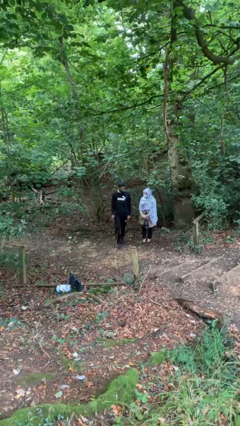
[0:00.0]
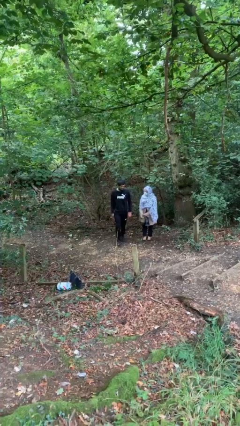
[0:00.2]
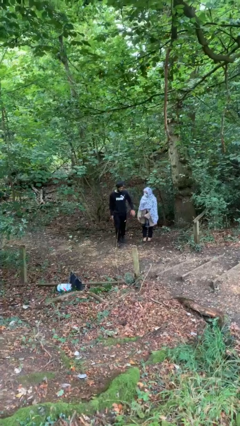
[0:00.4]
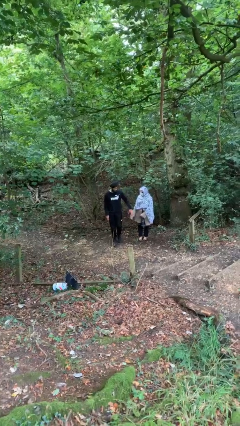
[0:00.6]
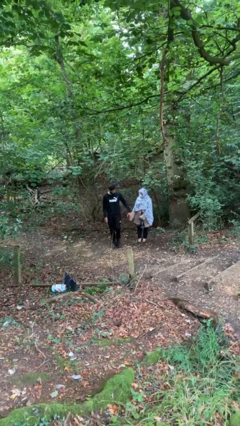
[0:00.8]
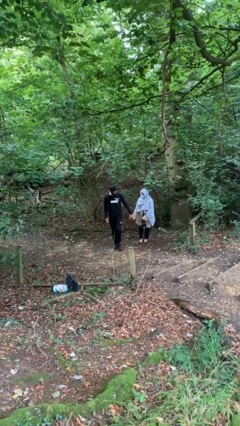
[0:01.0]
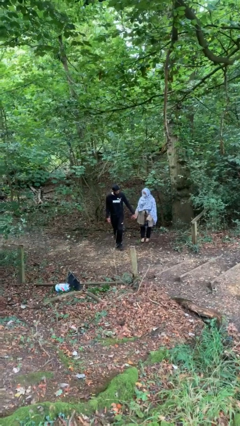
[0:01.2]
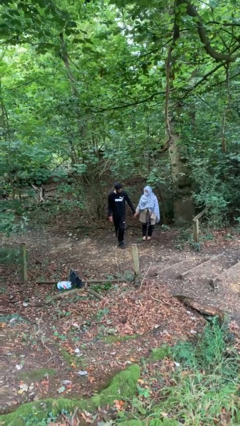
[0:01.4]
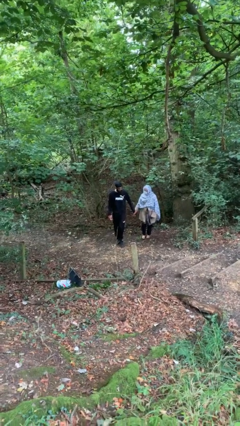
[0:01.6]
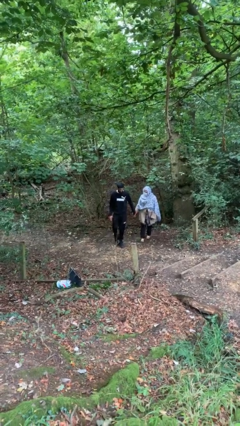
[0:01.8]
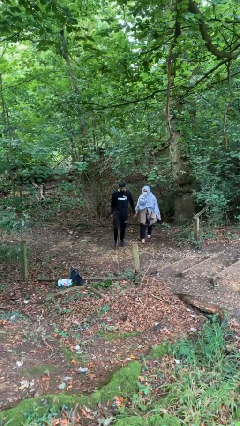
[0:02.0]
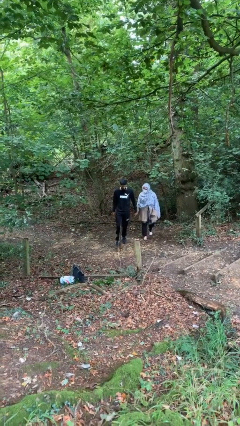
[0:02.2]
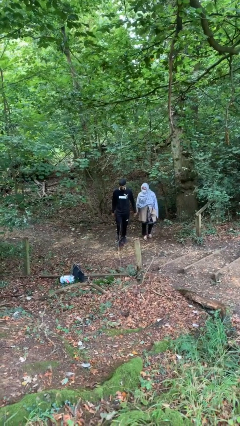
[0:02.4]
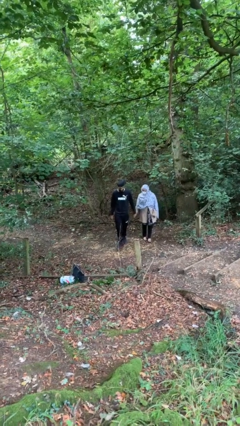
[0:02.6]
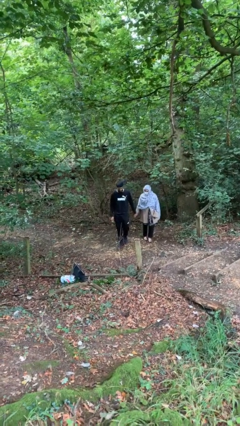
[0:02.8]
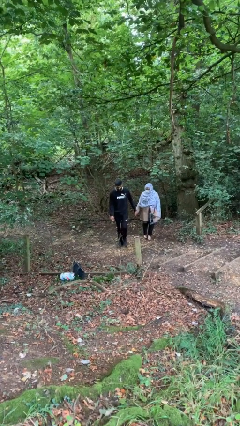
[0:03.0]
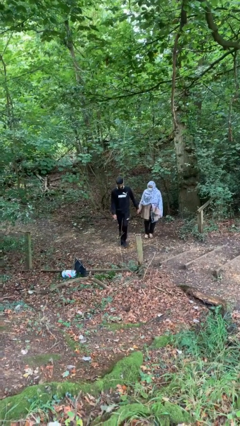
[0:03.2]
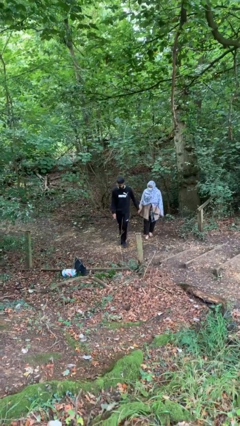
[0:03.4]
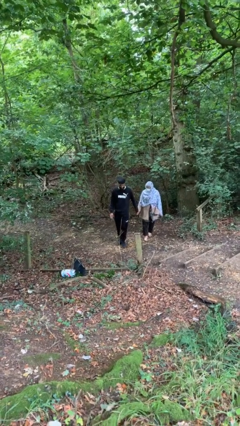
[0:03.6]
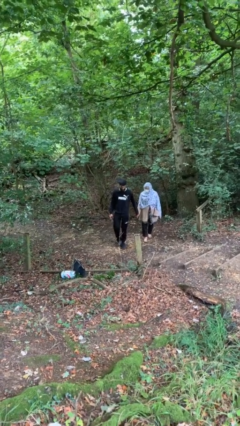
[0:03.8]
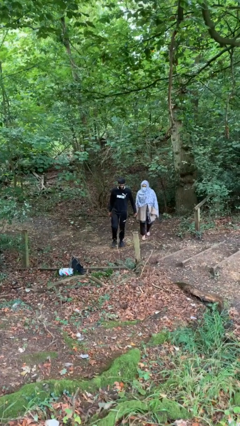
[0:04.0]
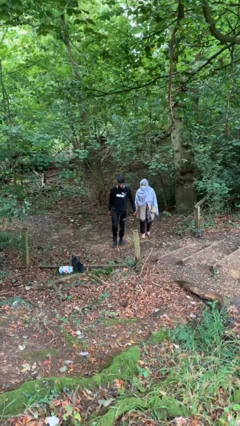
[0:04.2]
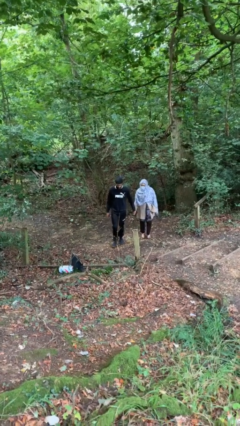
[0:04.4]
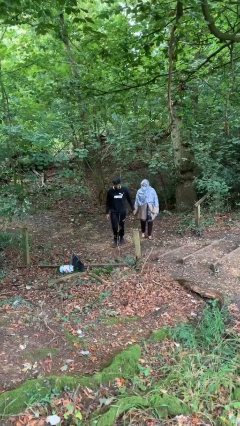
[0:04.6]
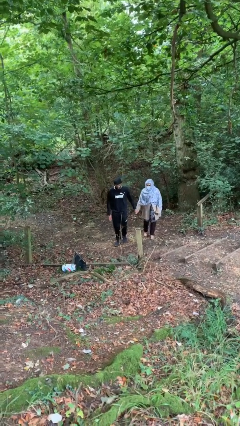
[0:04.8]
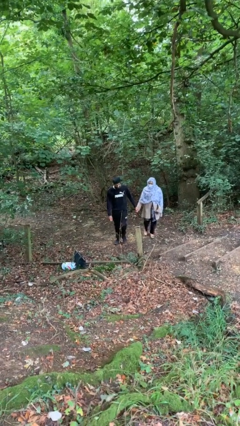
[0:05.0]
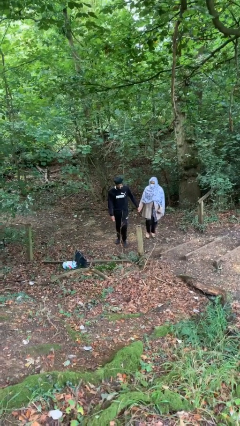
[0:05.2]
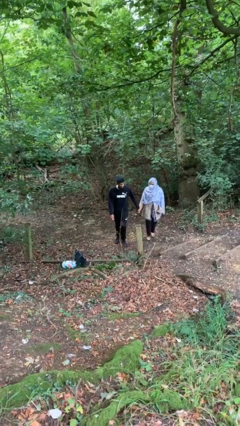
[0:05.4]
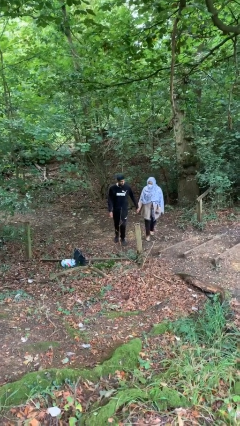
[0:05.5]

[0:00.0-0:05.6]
person holds hand

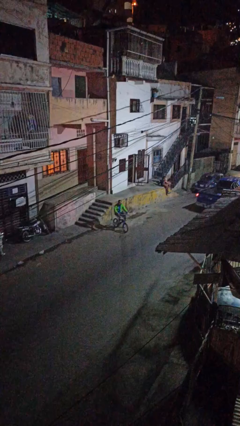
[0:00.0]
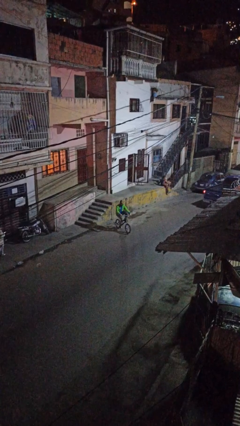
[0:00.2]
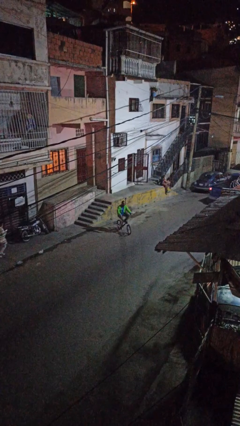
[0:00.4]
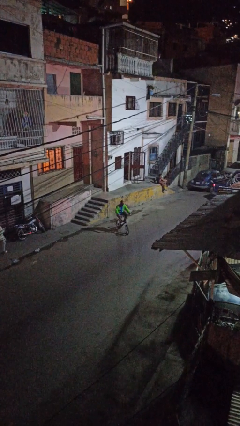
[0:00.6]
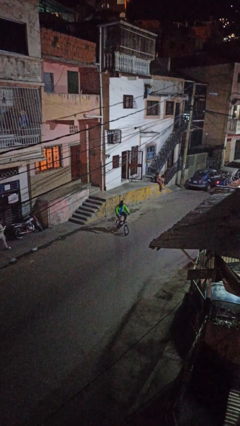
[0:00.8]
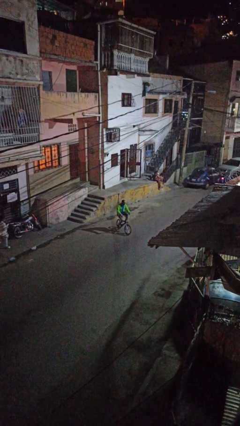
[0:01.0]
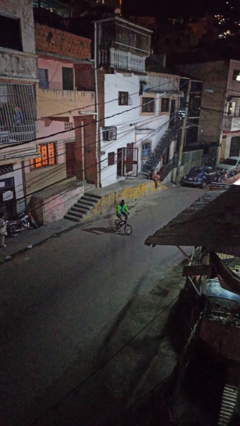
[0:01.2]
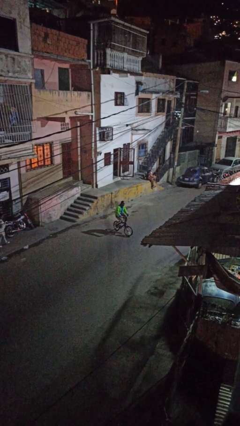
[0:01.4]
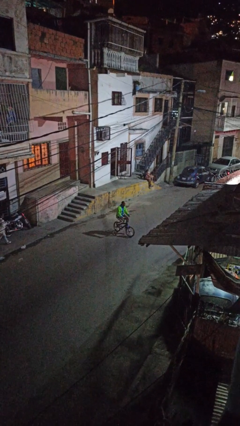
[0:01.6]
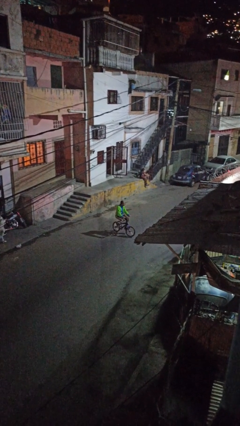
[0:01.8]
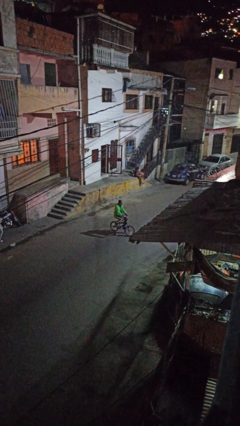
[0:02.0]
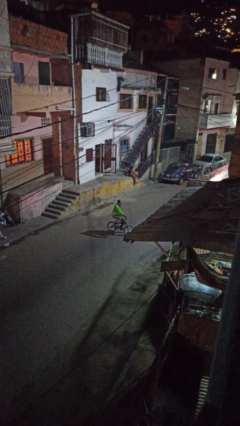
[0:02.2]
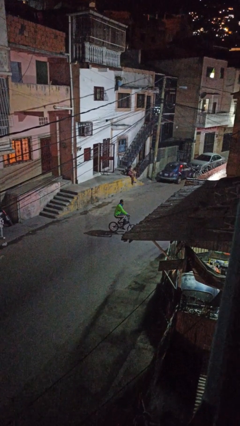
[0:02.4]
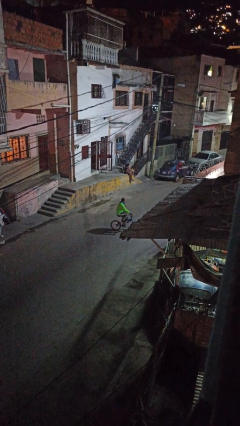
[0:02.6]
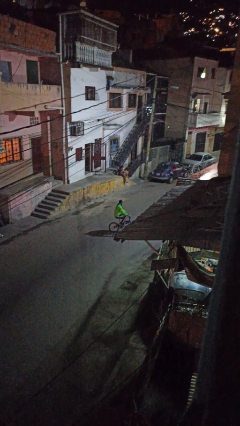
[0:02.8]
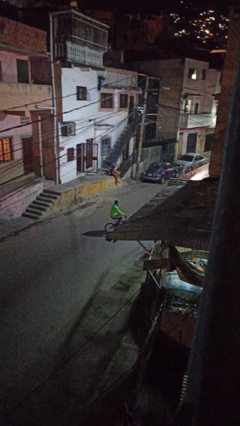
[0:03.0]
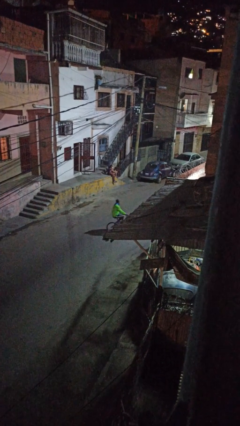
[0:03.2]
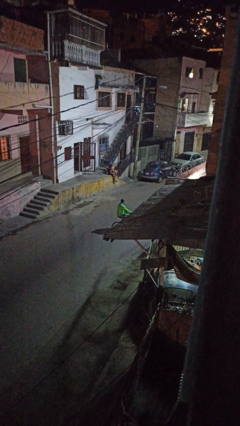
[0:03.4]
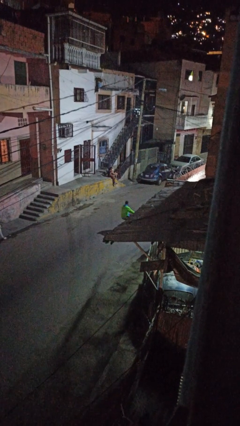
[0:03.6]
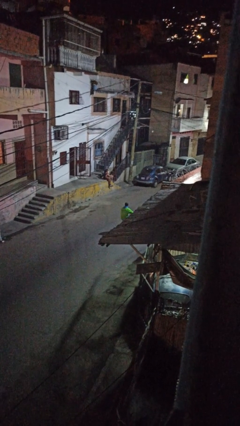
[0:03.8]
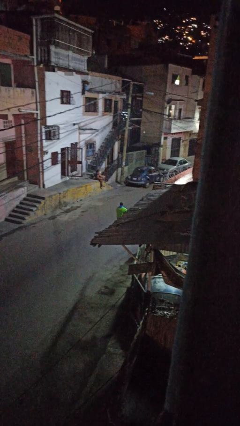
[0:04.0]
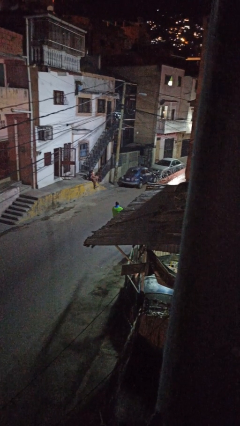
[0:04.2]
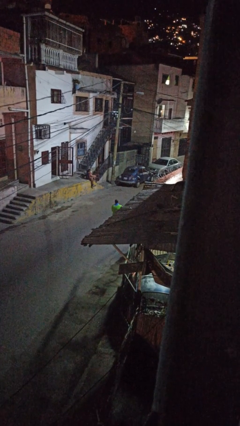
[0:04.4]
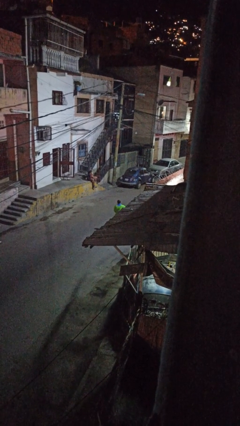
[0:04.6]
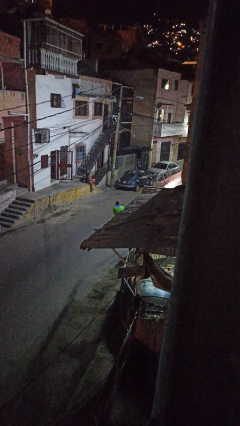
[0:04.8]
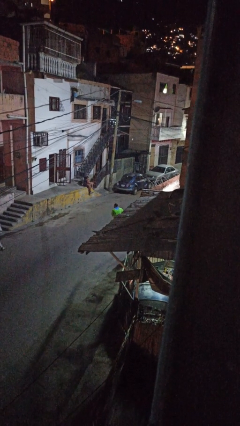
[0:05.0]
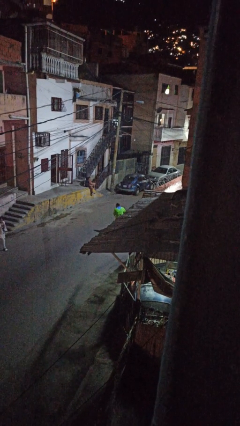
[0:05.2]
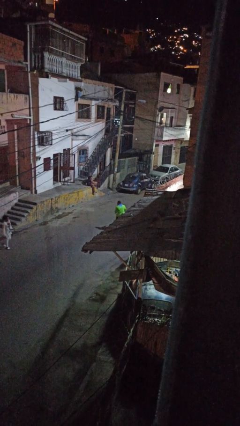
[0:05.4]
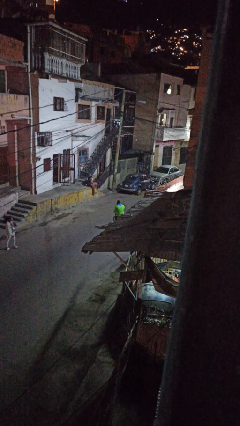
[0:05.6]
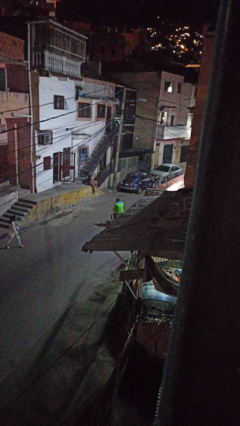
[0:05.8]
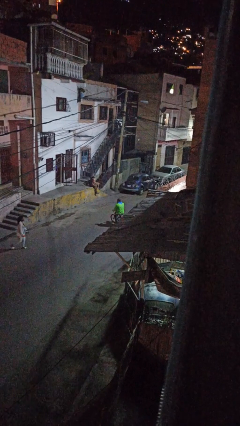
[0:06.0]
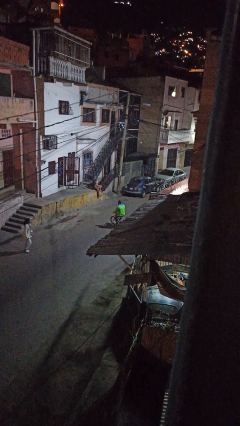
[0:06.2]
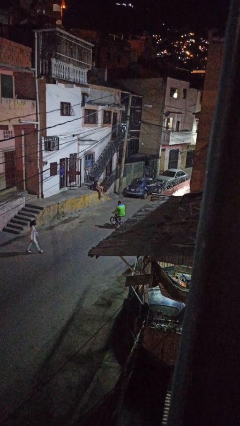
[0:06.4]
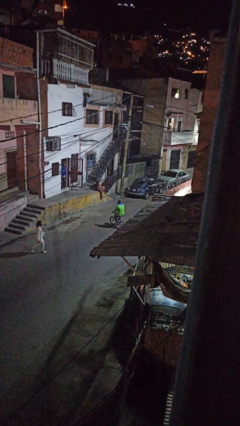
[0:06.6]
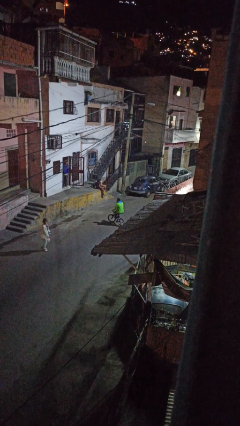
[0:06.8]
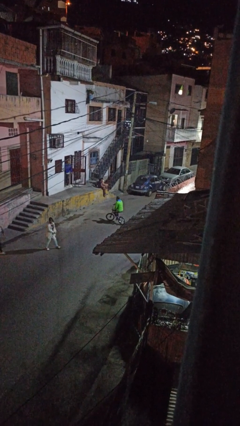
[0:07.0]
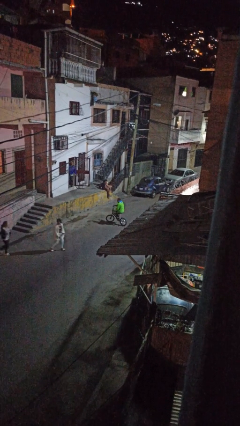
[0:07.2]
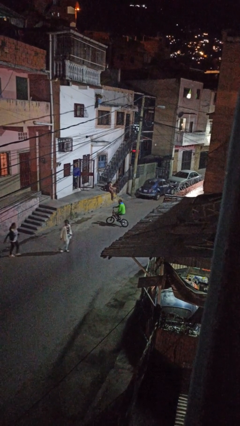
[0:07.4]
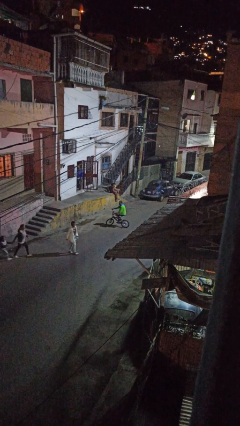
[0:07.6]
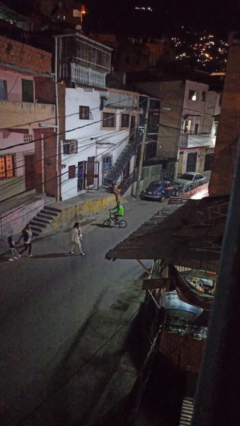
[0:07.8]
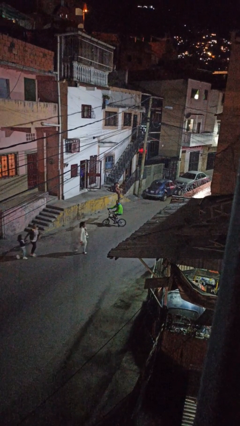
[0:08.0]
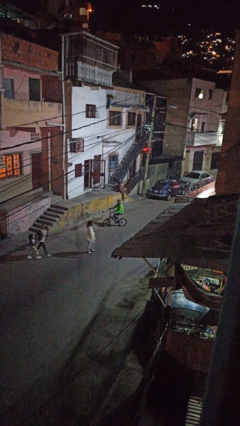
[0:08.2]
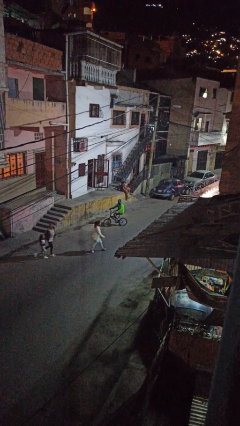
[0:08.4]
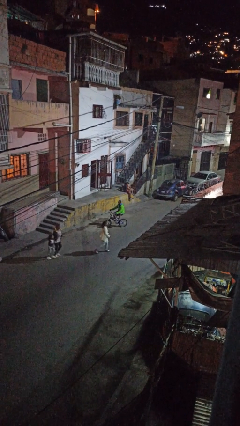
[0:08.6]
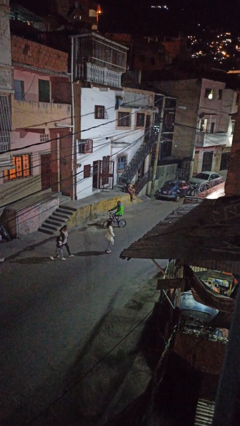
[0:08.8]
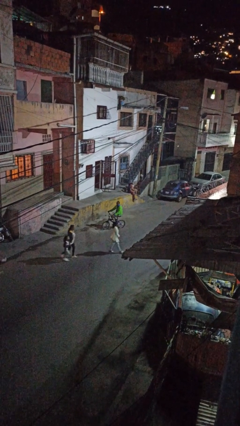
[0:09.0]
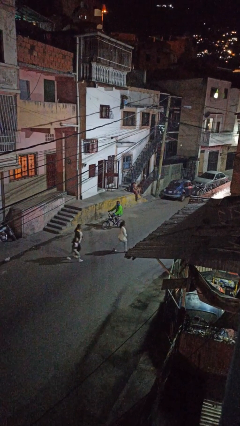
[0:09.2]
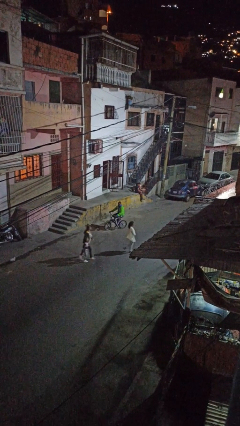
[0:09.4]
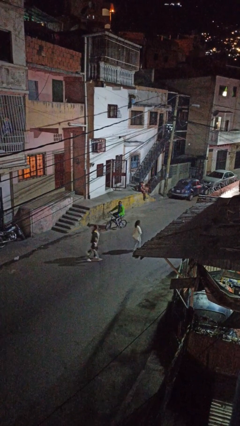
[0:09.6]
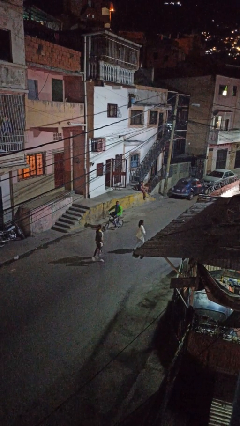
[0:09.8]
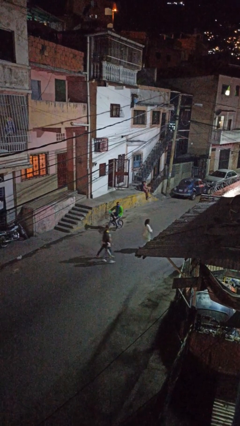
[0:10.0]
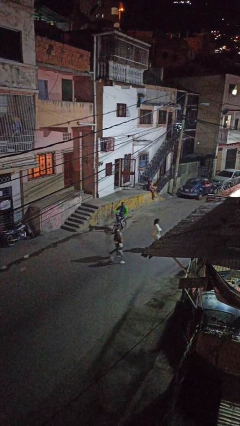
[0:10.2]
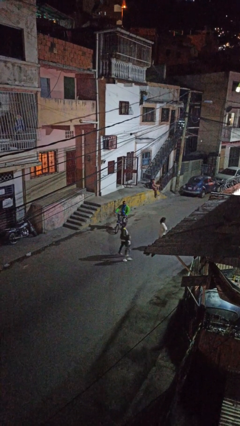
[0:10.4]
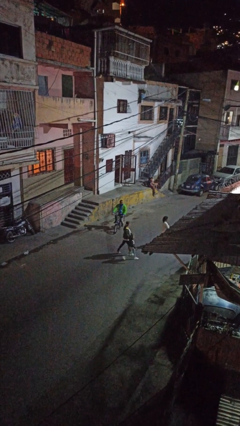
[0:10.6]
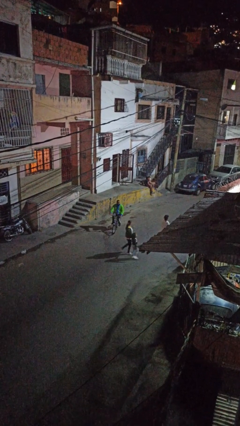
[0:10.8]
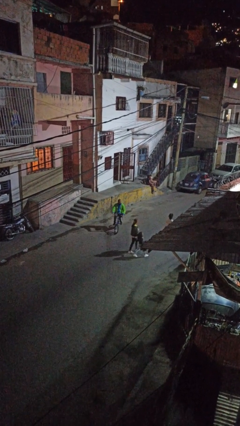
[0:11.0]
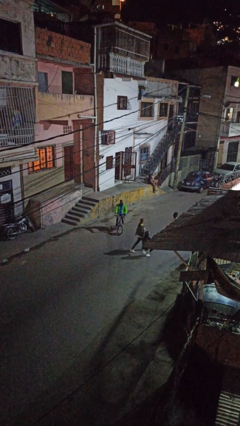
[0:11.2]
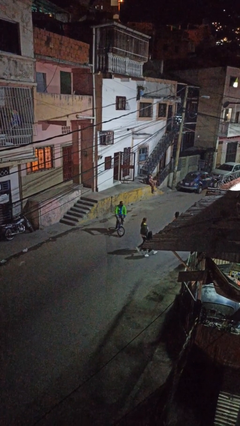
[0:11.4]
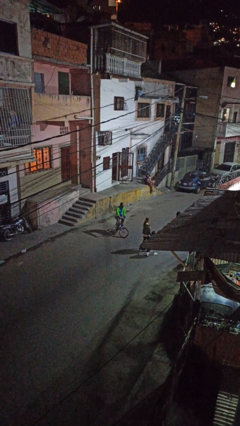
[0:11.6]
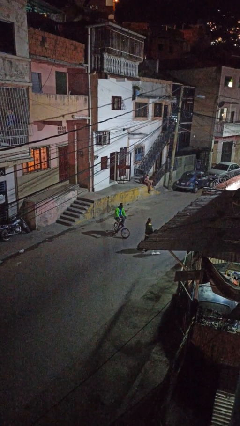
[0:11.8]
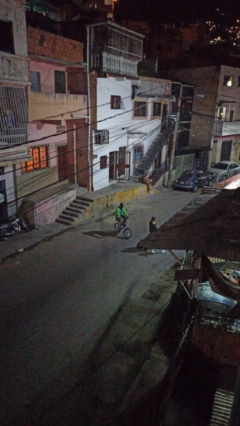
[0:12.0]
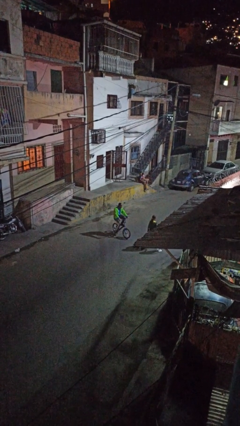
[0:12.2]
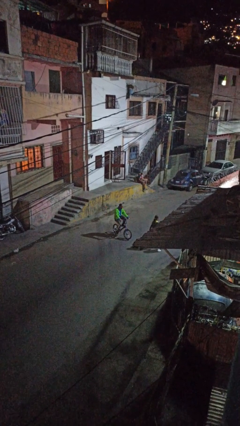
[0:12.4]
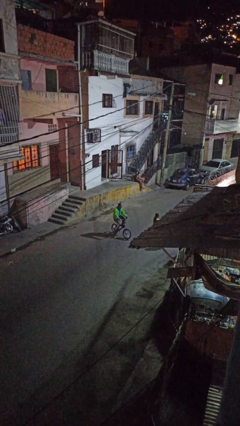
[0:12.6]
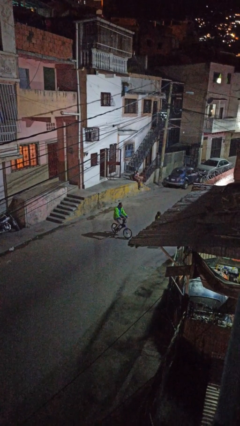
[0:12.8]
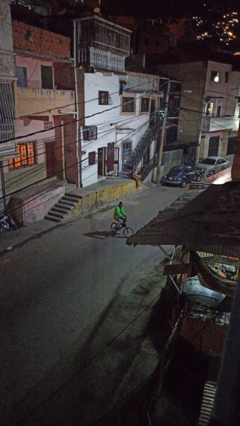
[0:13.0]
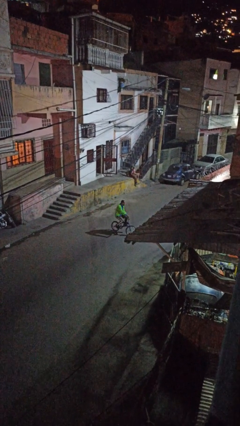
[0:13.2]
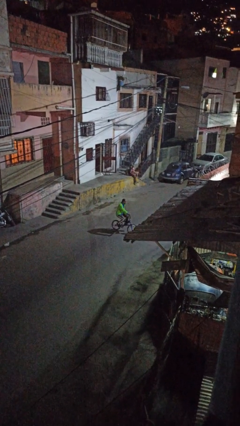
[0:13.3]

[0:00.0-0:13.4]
person rides bicycle
